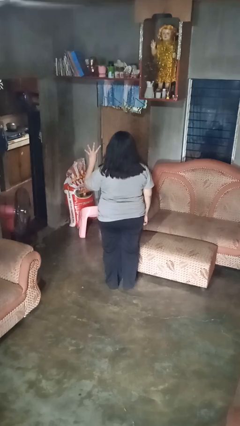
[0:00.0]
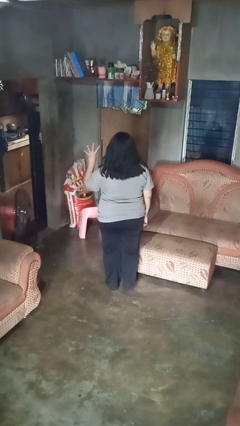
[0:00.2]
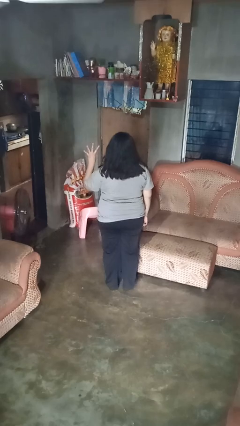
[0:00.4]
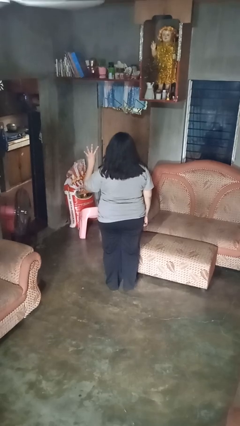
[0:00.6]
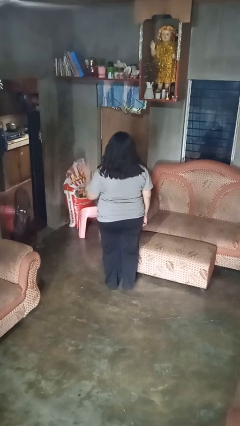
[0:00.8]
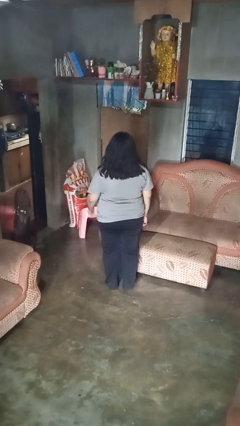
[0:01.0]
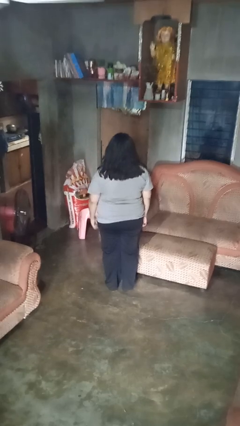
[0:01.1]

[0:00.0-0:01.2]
person gestures number four

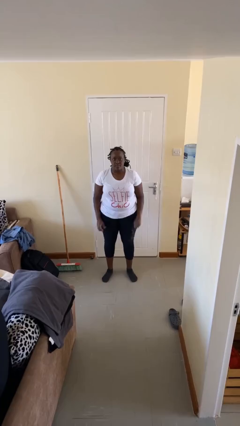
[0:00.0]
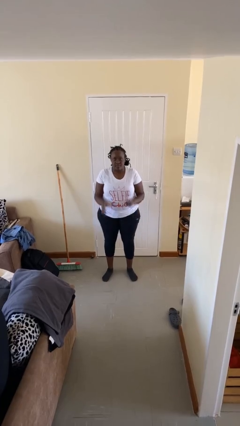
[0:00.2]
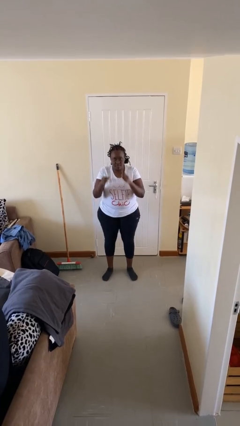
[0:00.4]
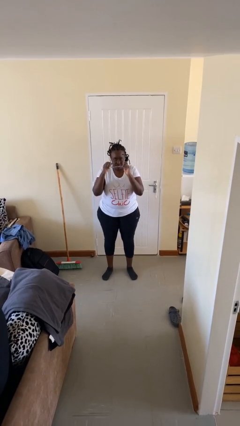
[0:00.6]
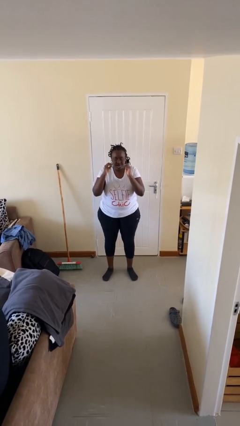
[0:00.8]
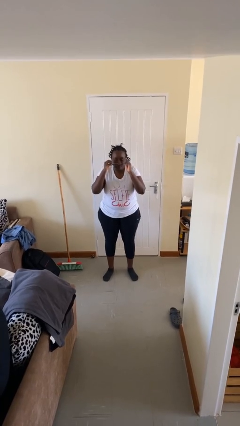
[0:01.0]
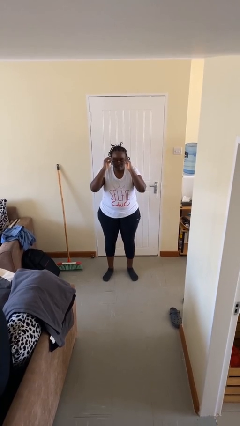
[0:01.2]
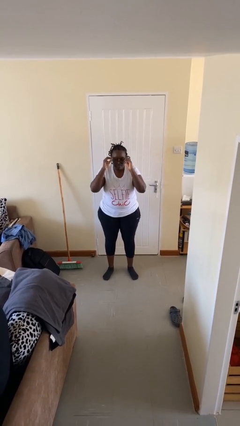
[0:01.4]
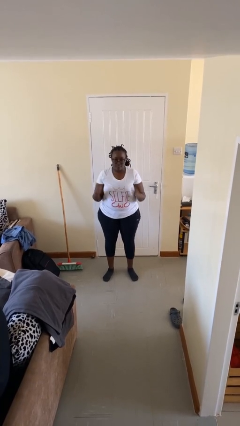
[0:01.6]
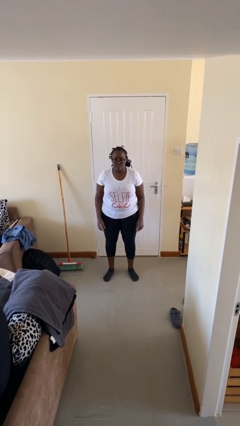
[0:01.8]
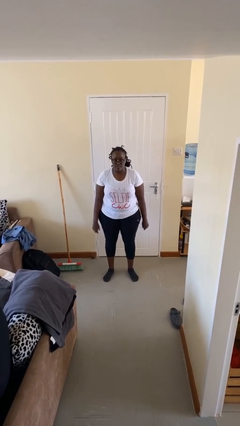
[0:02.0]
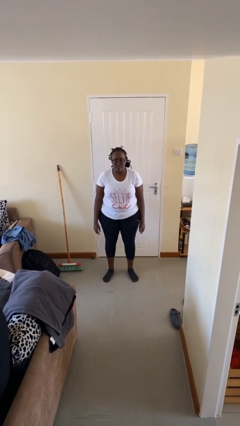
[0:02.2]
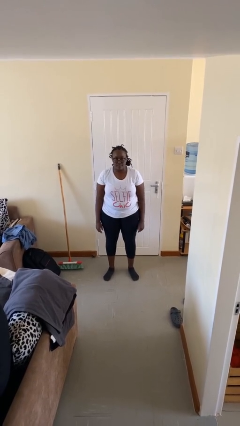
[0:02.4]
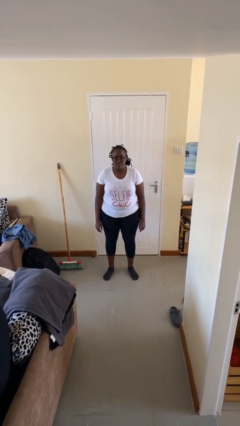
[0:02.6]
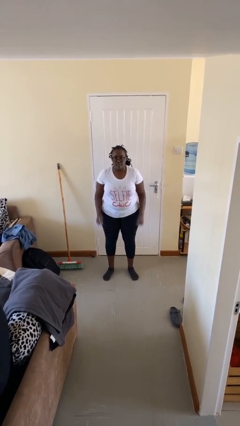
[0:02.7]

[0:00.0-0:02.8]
person puts on glasses

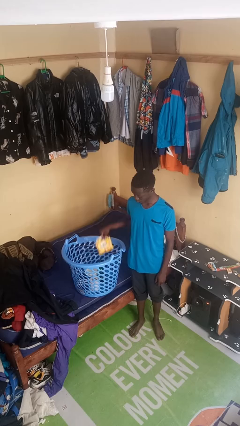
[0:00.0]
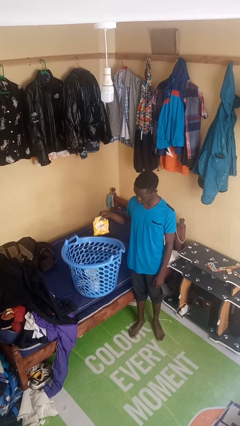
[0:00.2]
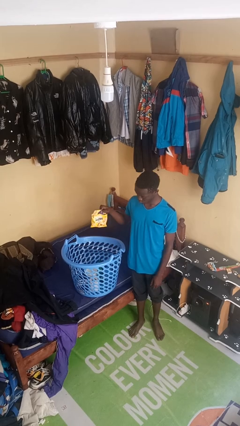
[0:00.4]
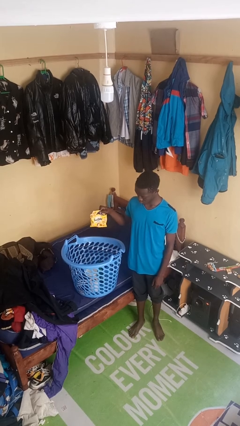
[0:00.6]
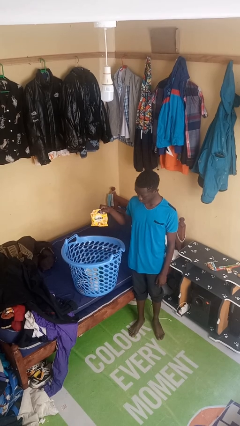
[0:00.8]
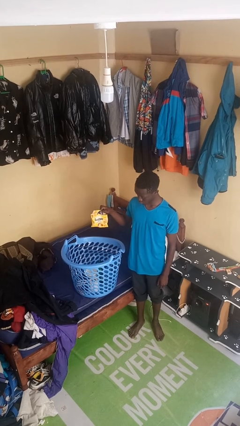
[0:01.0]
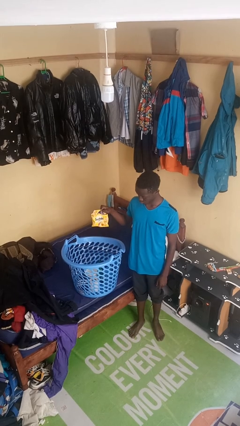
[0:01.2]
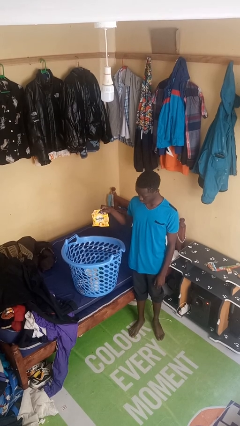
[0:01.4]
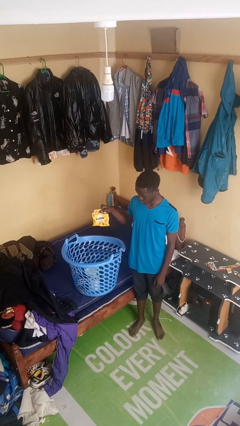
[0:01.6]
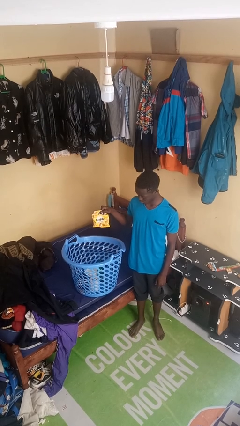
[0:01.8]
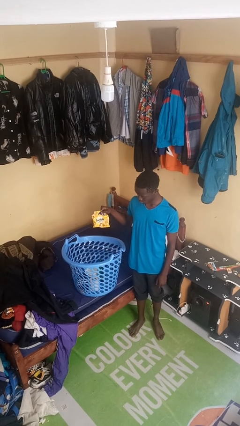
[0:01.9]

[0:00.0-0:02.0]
person takes object from basket

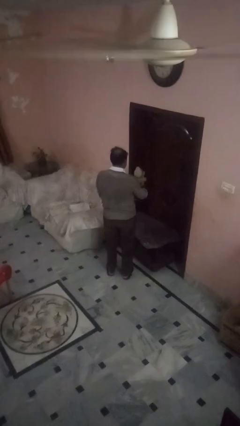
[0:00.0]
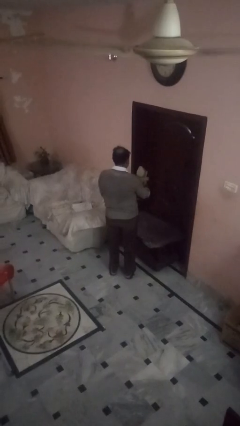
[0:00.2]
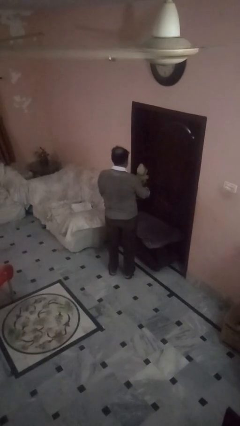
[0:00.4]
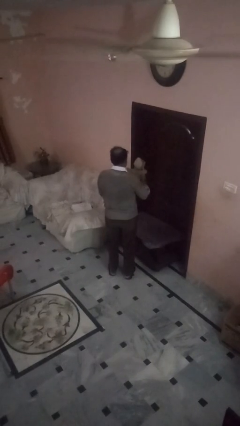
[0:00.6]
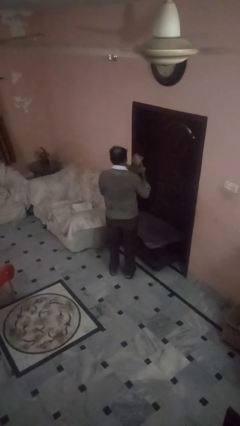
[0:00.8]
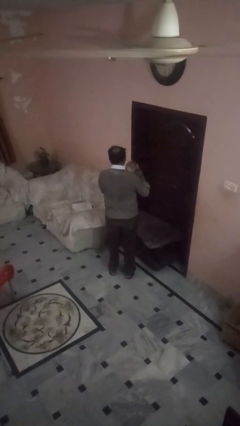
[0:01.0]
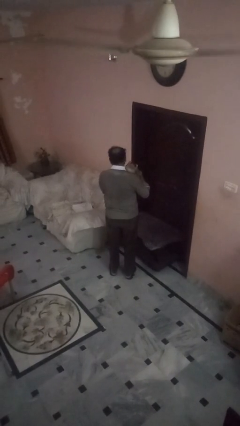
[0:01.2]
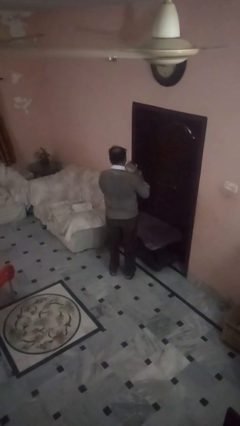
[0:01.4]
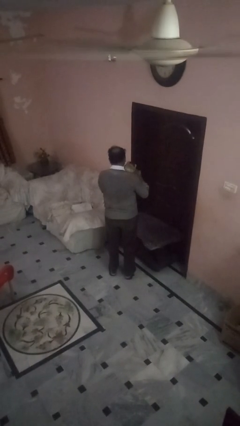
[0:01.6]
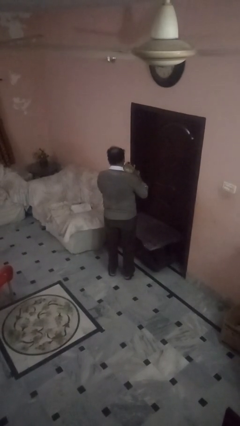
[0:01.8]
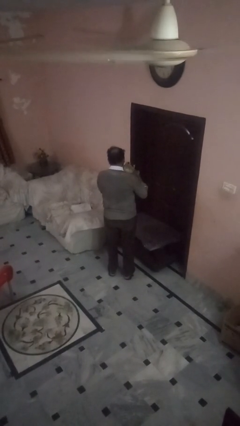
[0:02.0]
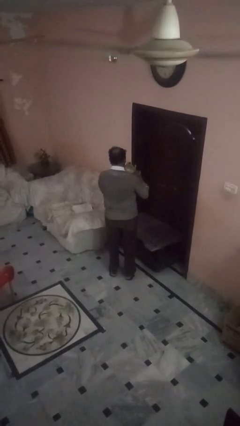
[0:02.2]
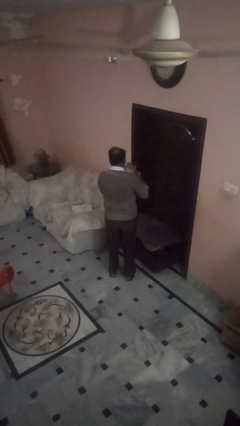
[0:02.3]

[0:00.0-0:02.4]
person hugs stuffed animal

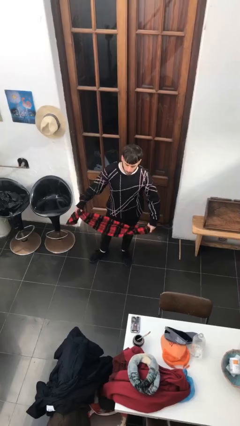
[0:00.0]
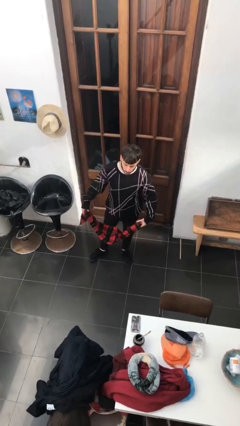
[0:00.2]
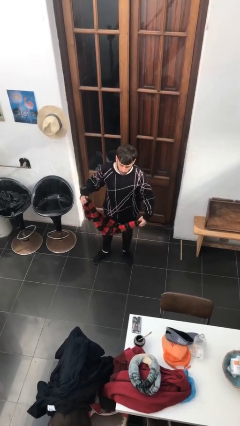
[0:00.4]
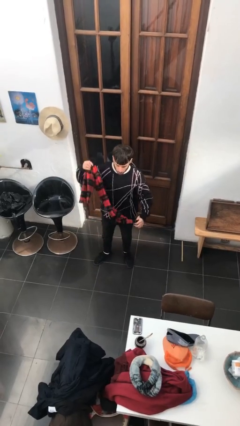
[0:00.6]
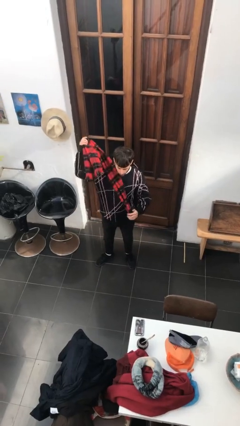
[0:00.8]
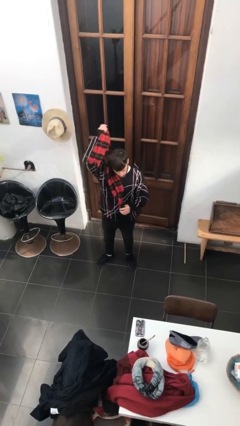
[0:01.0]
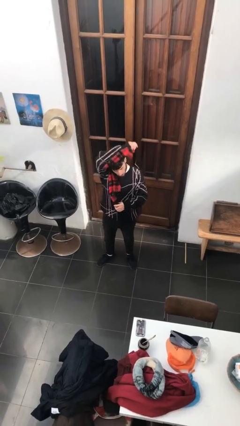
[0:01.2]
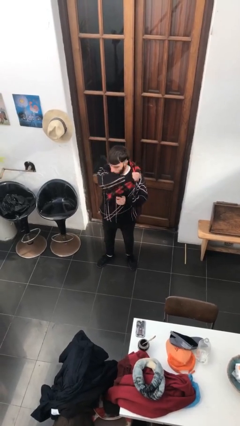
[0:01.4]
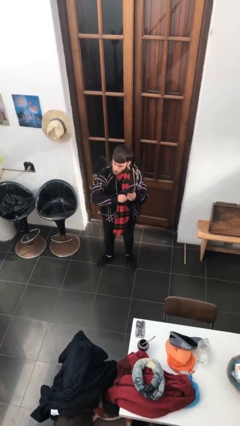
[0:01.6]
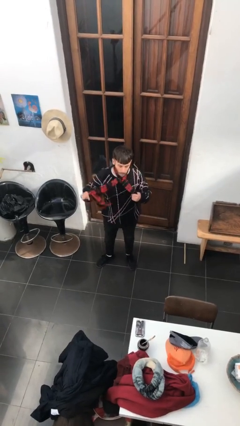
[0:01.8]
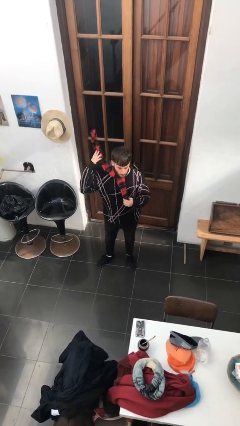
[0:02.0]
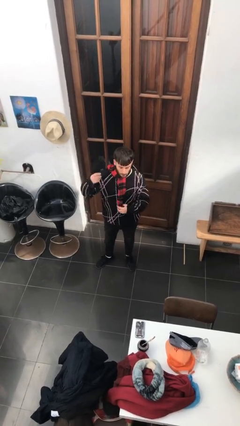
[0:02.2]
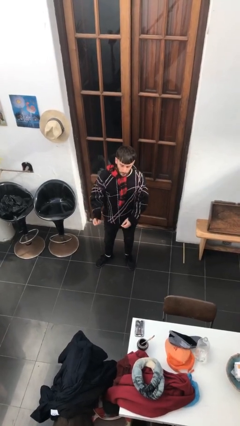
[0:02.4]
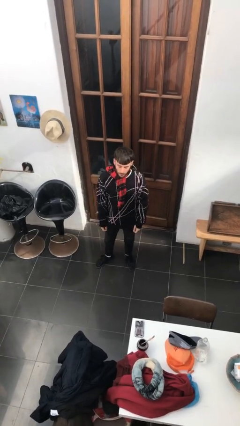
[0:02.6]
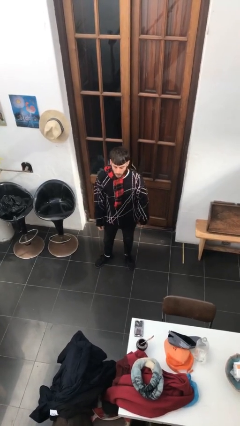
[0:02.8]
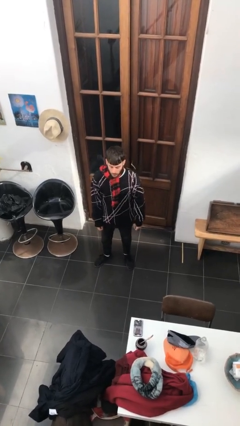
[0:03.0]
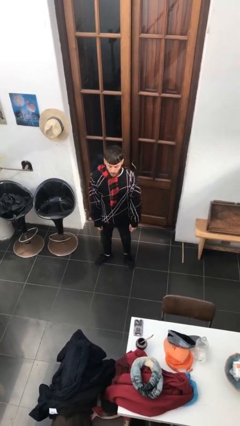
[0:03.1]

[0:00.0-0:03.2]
person puts on scarf

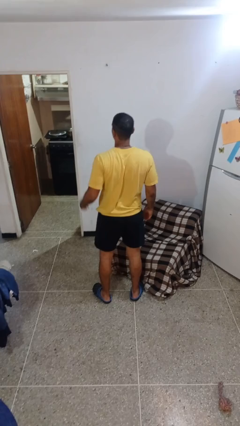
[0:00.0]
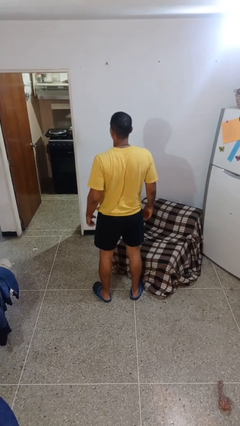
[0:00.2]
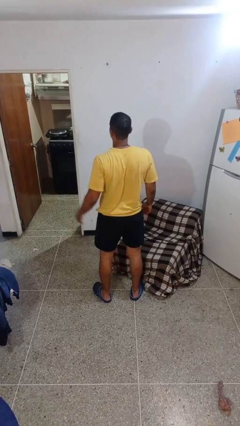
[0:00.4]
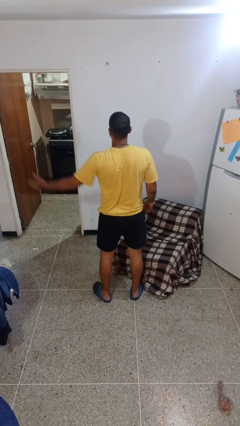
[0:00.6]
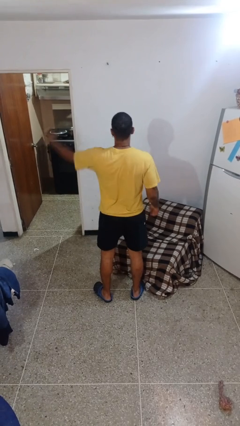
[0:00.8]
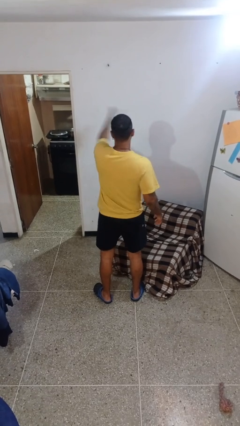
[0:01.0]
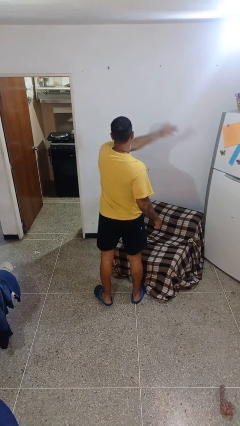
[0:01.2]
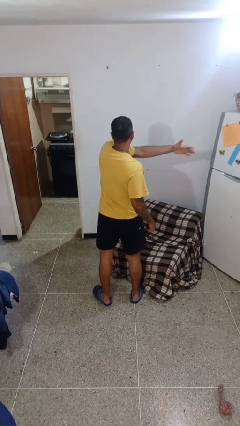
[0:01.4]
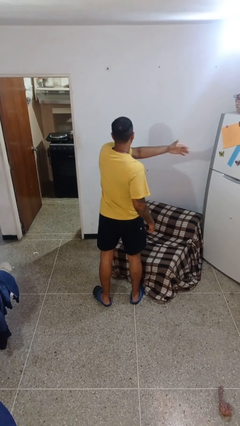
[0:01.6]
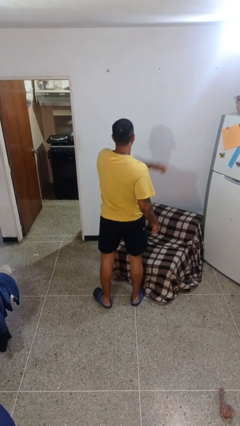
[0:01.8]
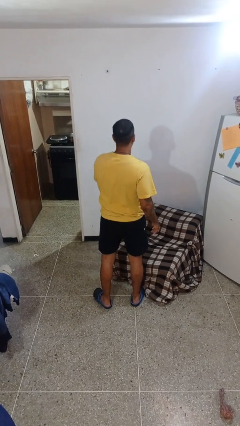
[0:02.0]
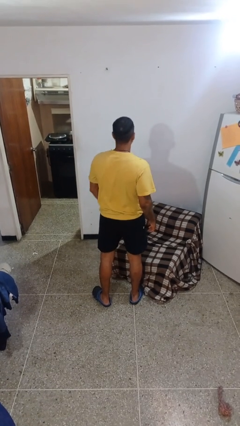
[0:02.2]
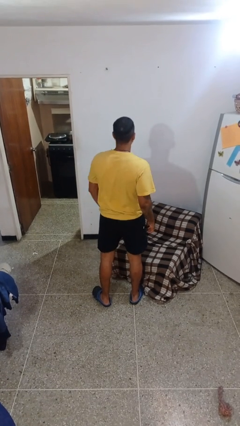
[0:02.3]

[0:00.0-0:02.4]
person gestures swipe right

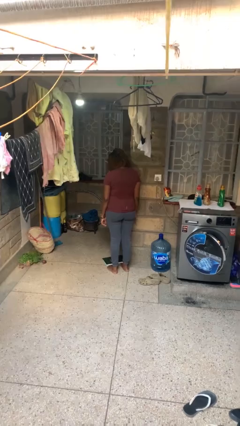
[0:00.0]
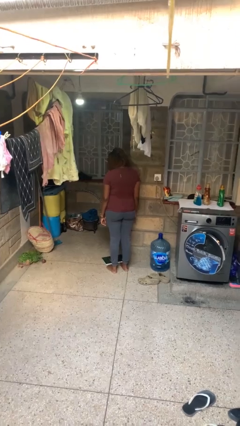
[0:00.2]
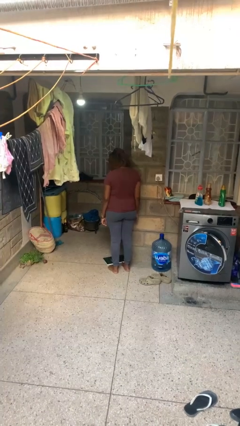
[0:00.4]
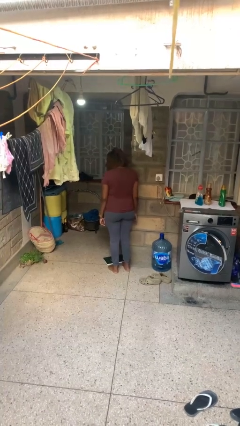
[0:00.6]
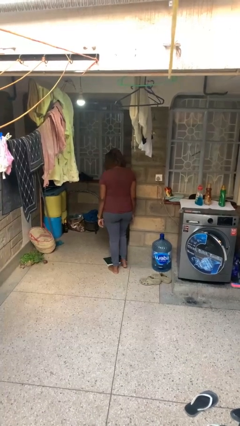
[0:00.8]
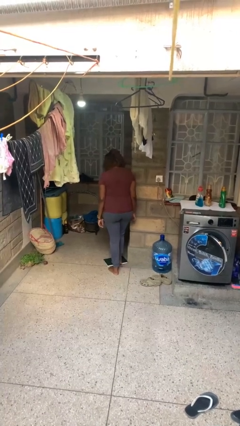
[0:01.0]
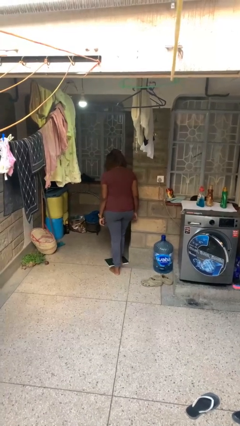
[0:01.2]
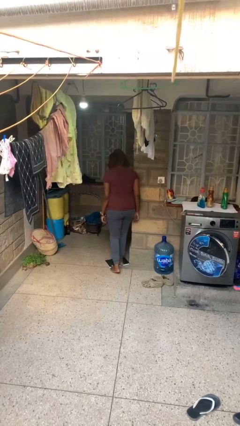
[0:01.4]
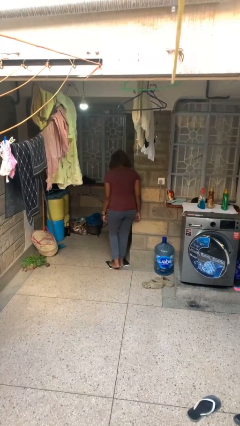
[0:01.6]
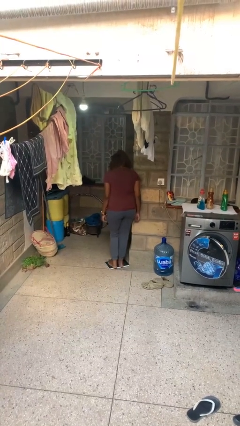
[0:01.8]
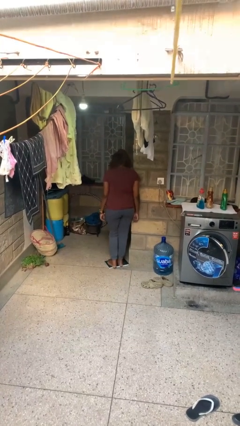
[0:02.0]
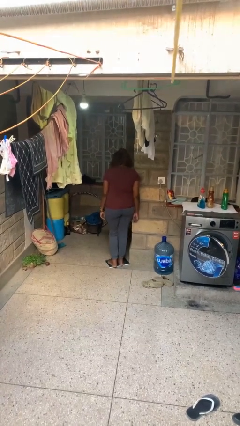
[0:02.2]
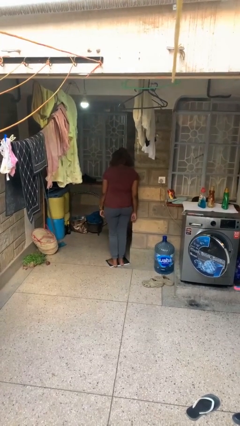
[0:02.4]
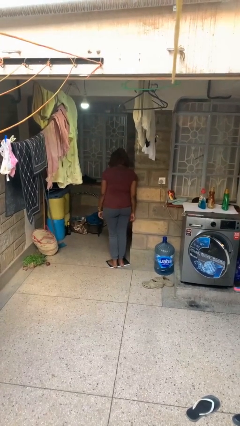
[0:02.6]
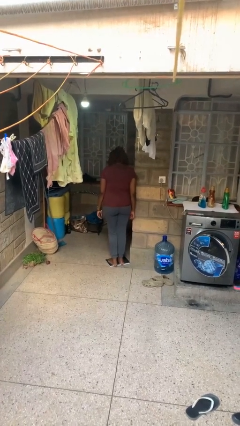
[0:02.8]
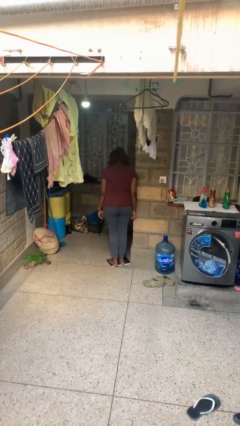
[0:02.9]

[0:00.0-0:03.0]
person uses bodyweight scale
